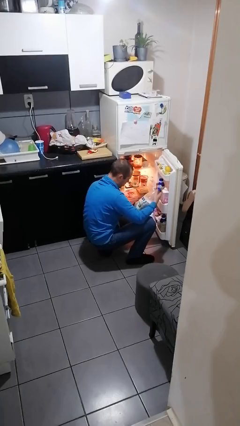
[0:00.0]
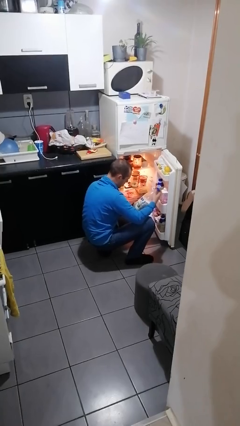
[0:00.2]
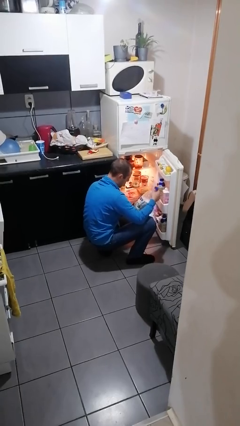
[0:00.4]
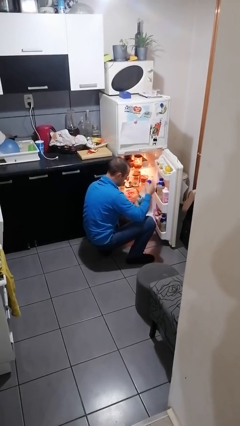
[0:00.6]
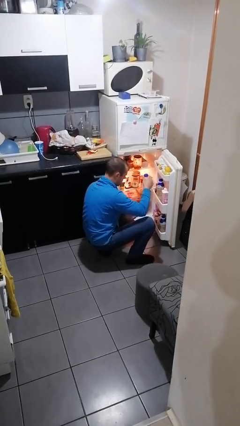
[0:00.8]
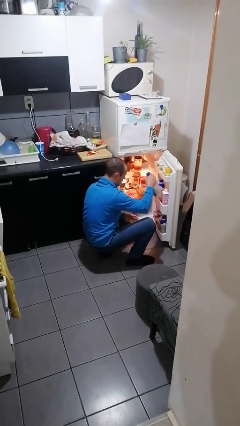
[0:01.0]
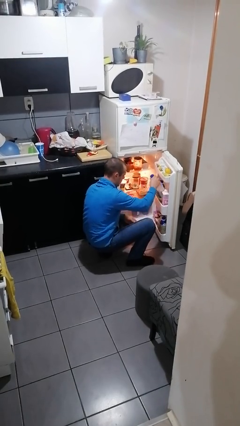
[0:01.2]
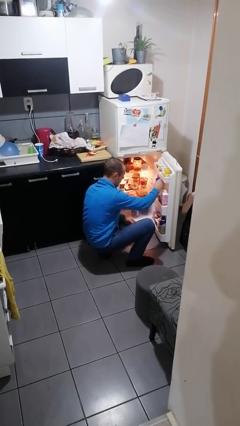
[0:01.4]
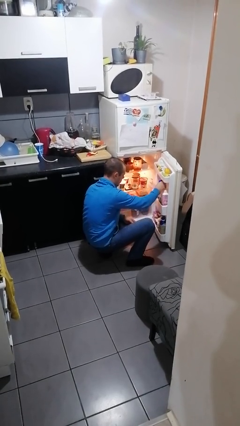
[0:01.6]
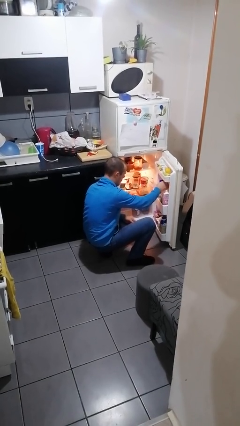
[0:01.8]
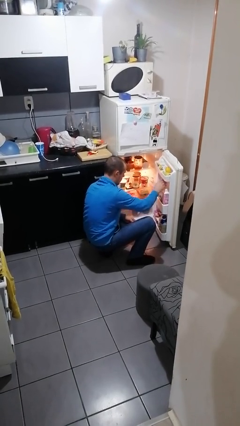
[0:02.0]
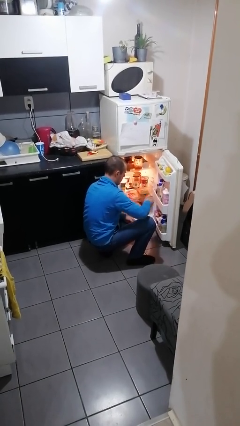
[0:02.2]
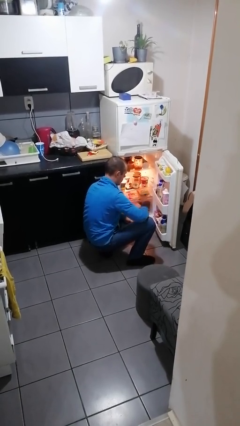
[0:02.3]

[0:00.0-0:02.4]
person puts object into refrigerator

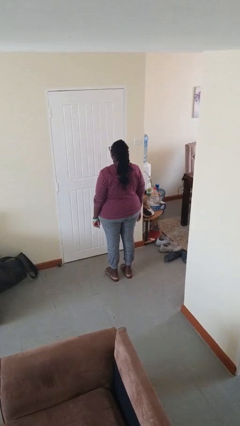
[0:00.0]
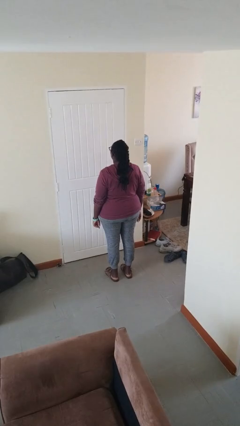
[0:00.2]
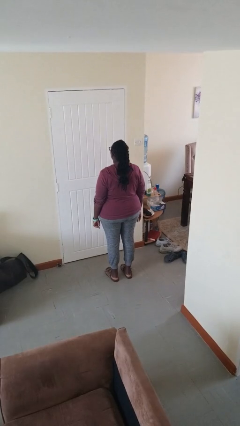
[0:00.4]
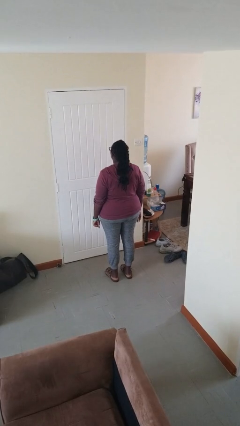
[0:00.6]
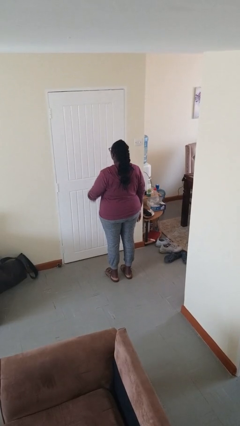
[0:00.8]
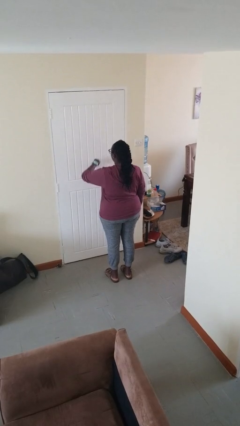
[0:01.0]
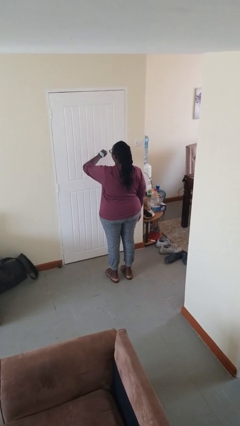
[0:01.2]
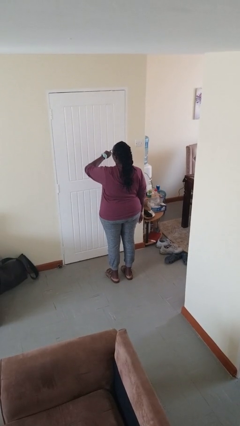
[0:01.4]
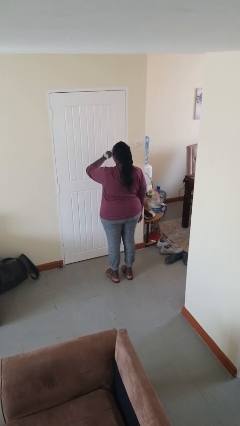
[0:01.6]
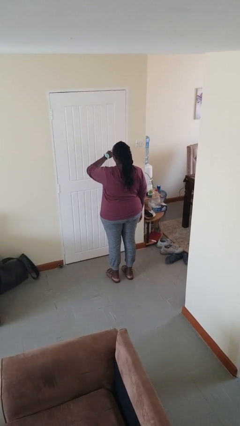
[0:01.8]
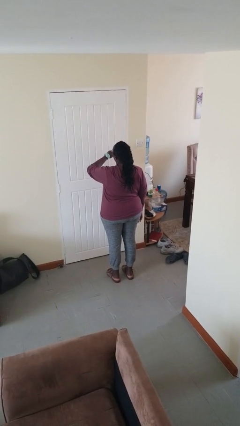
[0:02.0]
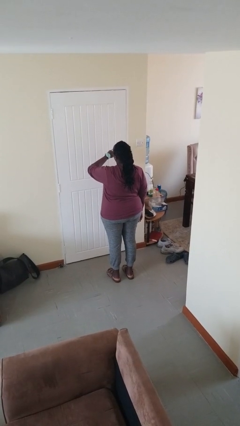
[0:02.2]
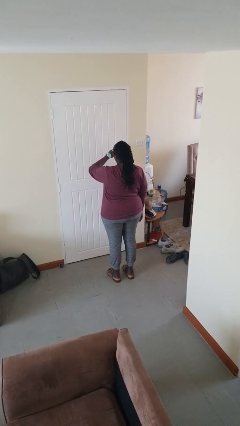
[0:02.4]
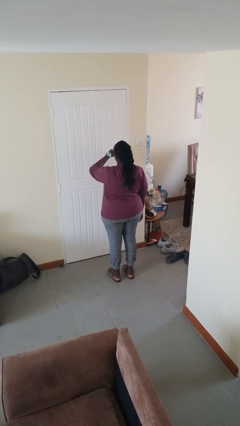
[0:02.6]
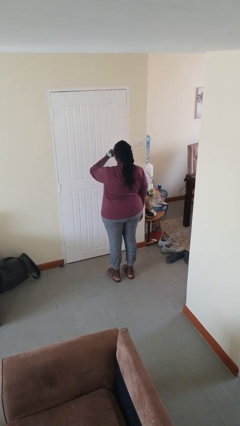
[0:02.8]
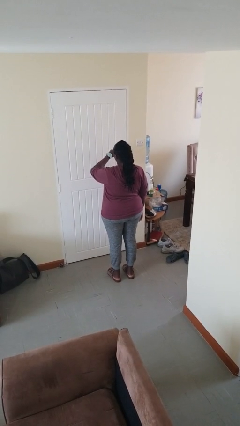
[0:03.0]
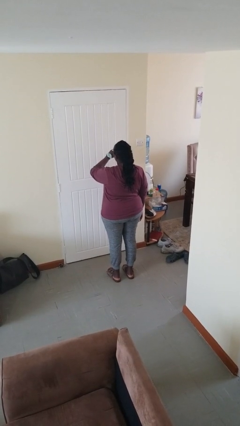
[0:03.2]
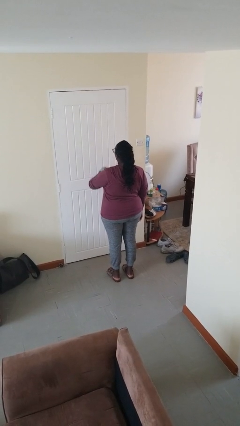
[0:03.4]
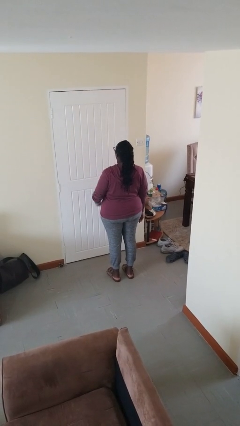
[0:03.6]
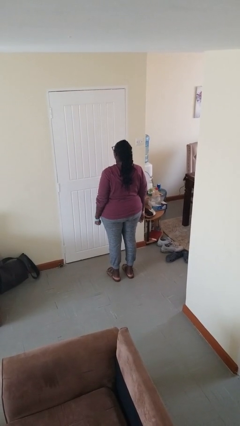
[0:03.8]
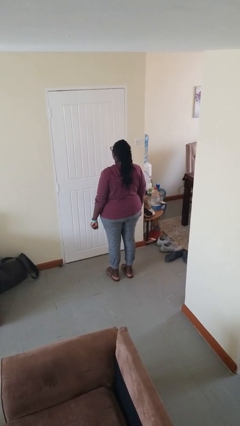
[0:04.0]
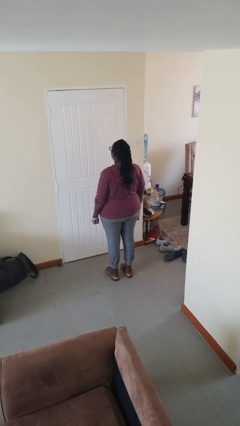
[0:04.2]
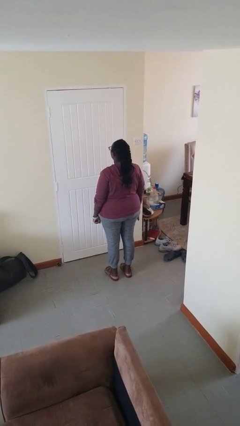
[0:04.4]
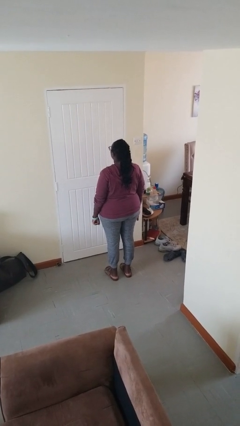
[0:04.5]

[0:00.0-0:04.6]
person looks at wristwatch

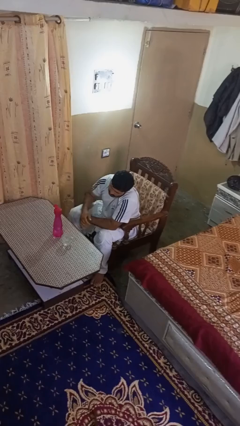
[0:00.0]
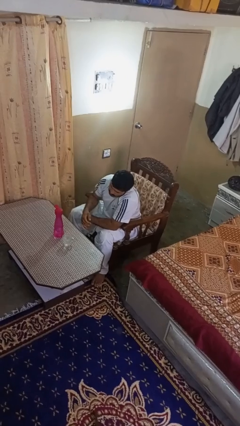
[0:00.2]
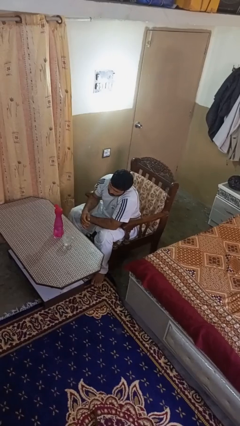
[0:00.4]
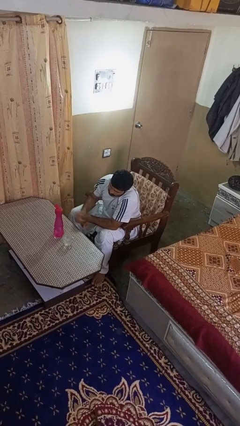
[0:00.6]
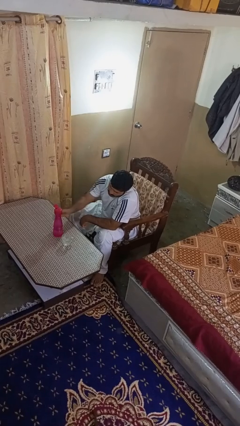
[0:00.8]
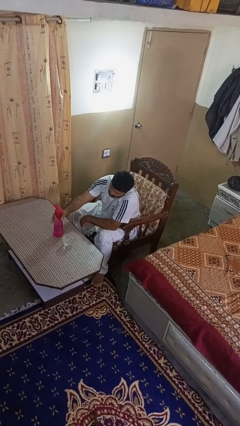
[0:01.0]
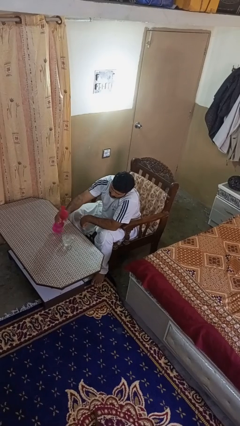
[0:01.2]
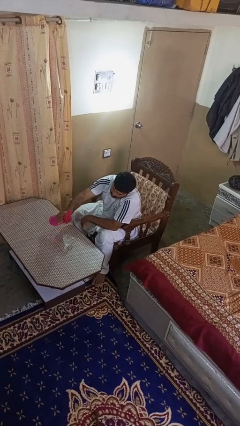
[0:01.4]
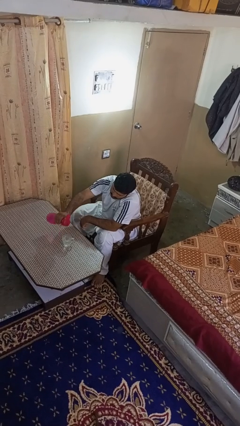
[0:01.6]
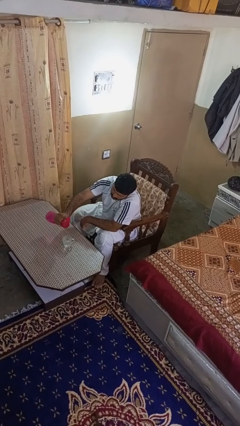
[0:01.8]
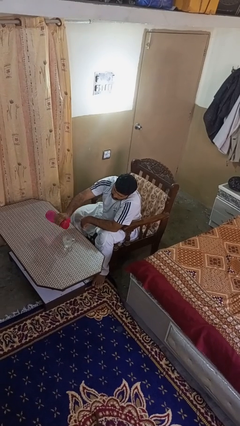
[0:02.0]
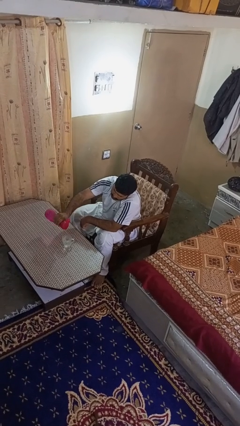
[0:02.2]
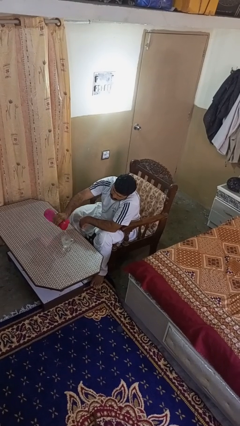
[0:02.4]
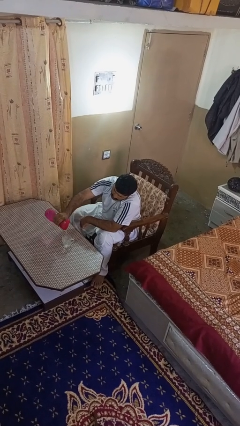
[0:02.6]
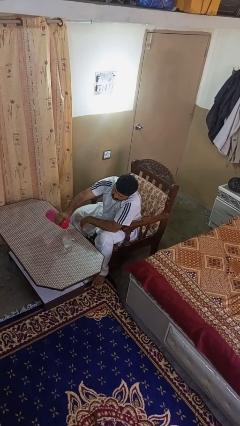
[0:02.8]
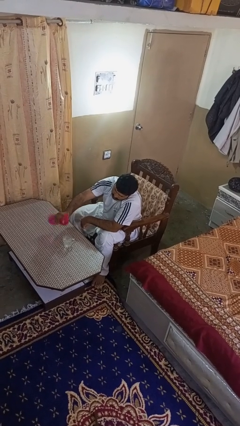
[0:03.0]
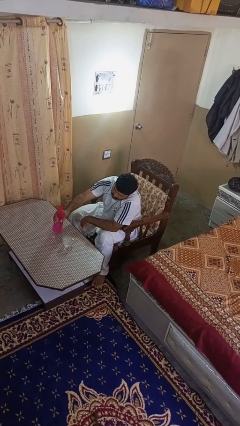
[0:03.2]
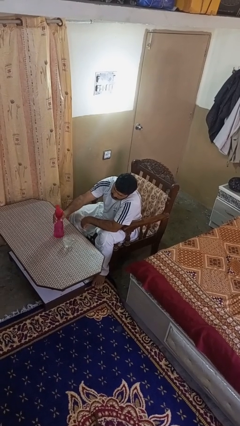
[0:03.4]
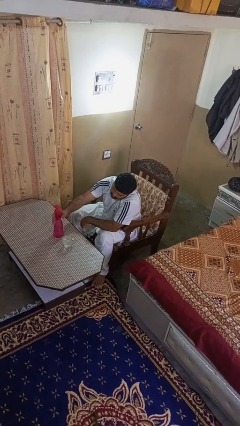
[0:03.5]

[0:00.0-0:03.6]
person pours liquid into cup

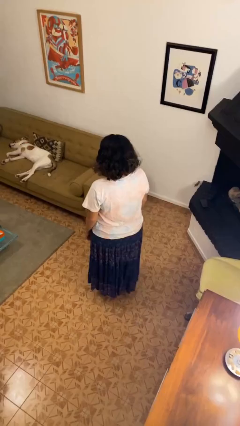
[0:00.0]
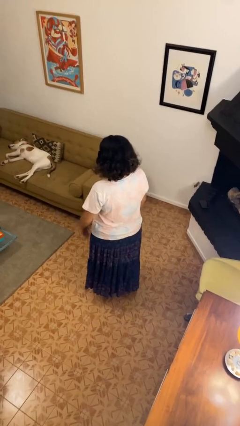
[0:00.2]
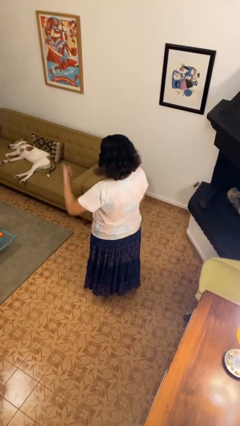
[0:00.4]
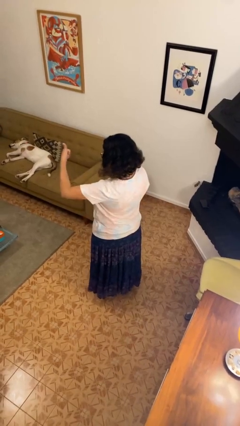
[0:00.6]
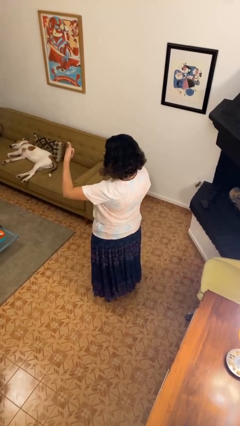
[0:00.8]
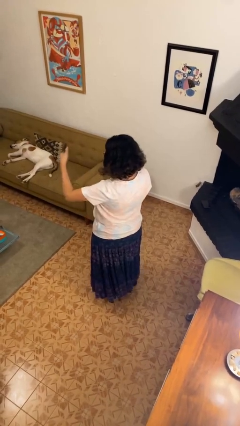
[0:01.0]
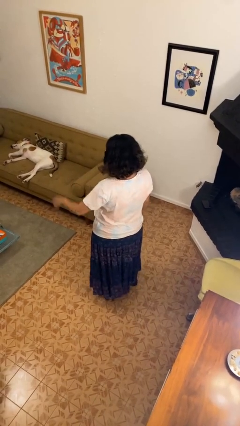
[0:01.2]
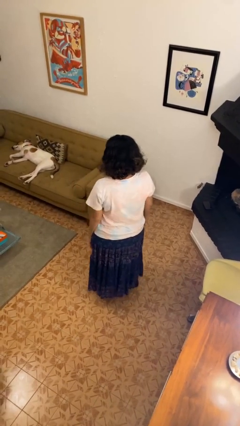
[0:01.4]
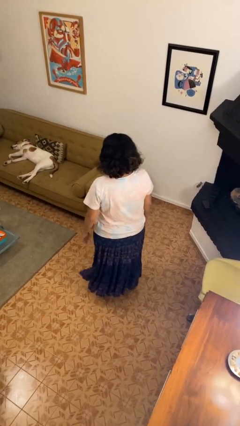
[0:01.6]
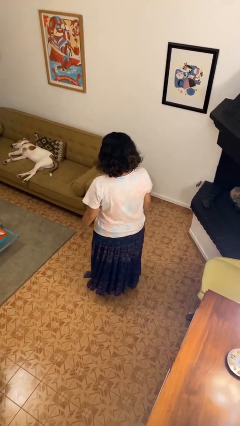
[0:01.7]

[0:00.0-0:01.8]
person gestures thumbs up

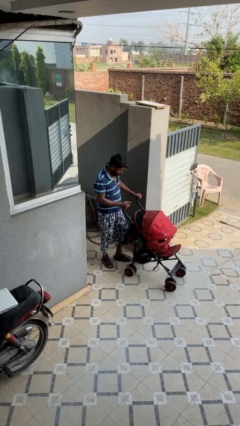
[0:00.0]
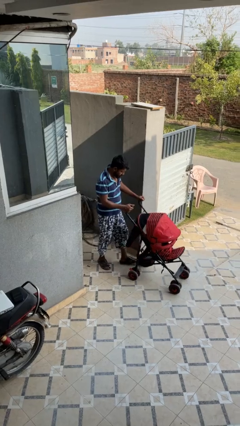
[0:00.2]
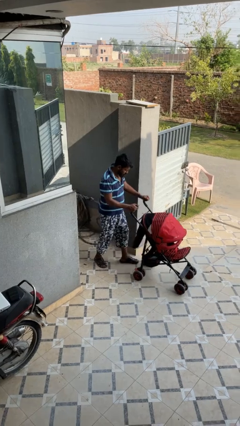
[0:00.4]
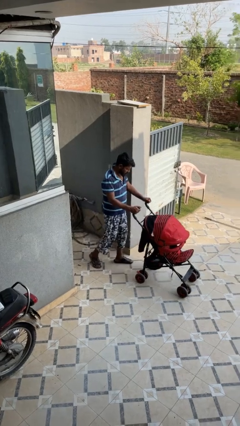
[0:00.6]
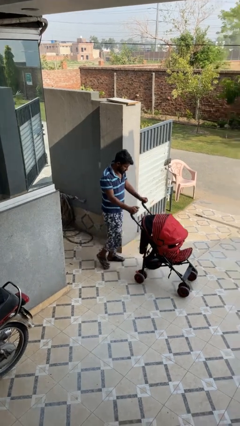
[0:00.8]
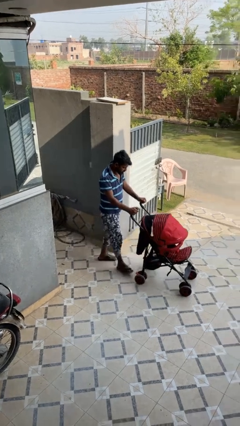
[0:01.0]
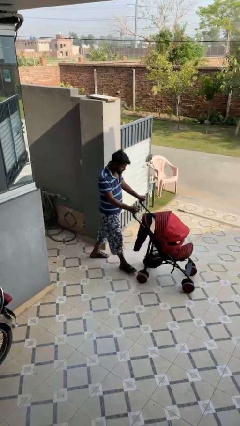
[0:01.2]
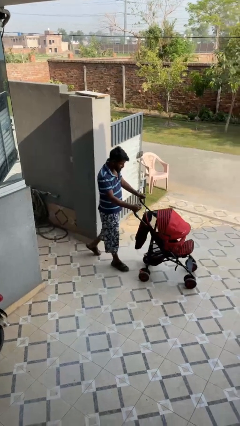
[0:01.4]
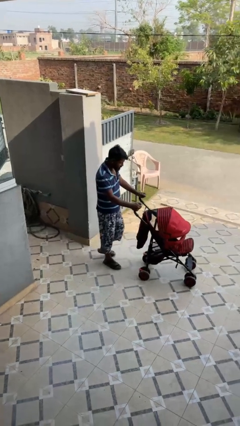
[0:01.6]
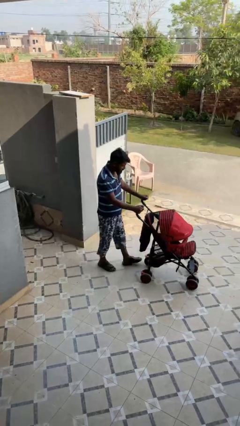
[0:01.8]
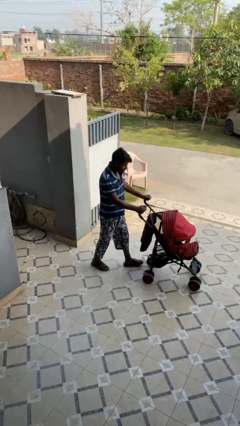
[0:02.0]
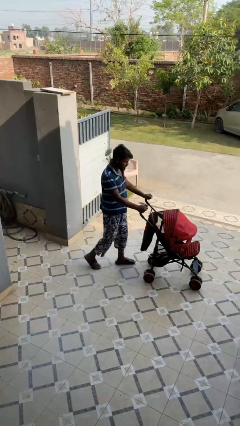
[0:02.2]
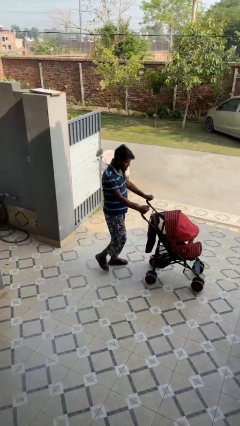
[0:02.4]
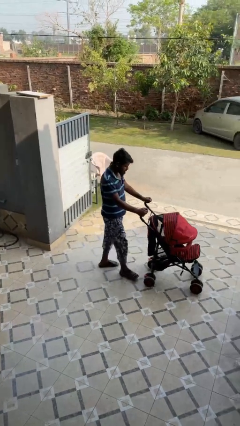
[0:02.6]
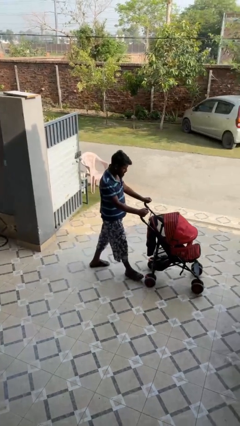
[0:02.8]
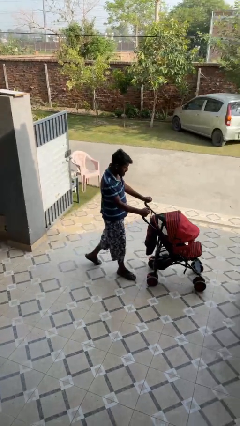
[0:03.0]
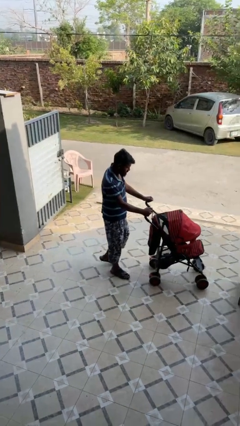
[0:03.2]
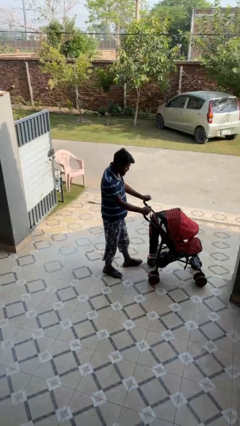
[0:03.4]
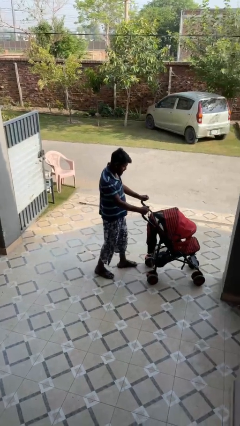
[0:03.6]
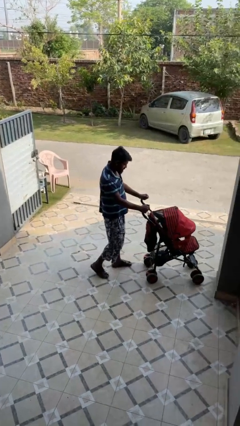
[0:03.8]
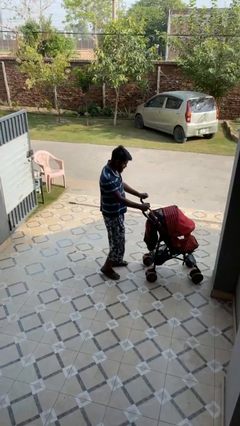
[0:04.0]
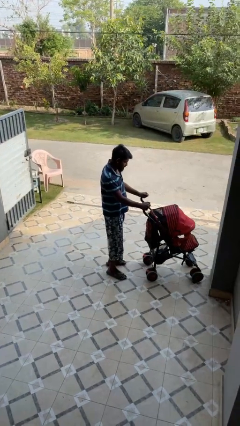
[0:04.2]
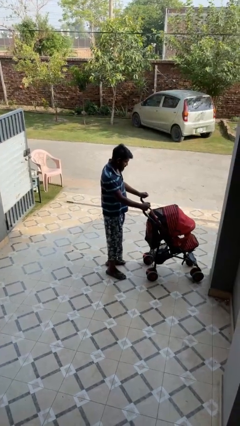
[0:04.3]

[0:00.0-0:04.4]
person pushes wheeled cart

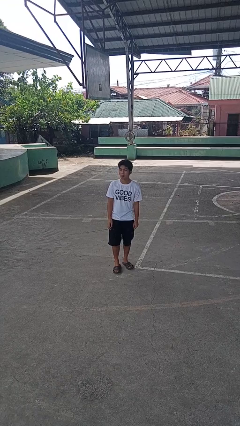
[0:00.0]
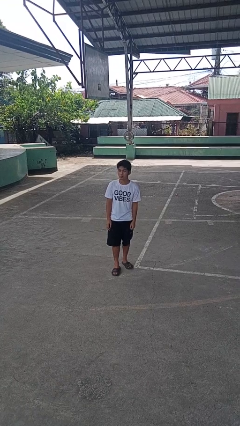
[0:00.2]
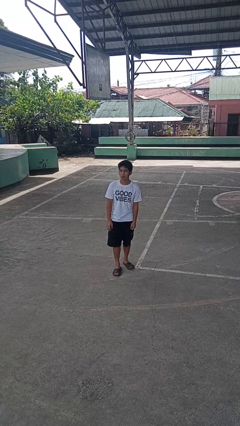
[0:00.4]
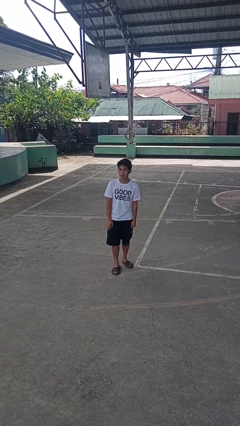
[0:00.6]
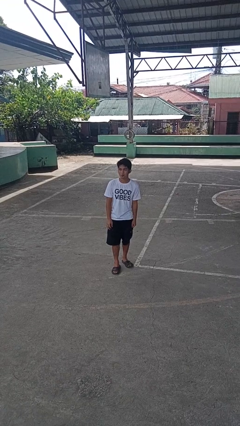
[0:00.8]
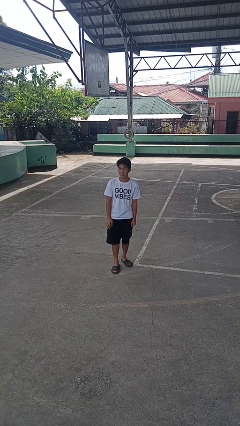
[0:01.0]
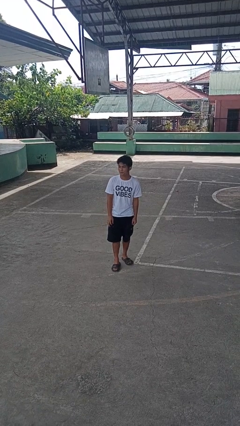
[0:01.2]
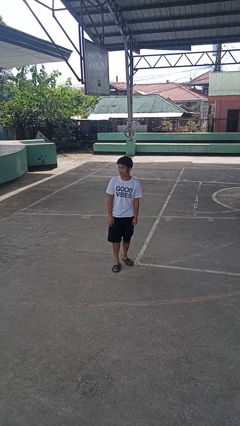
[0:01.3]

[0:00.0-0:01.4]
person sticks out tongue
